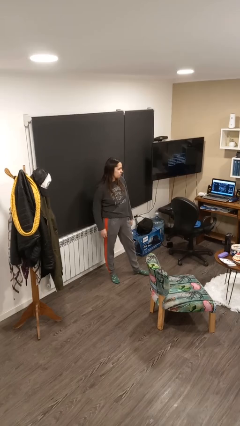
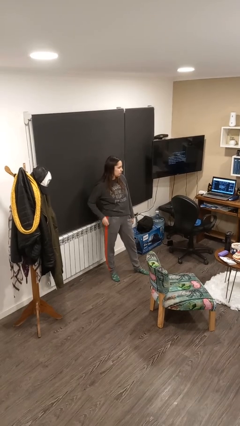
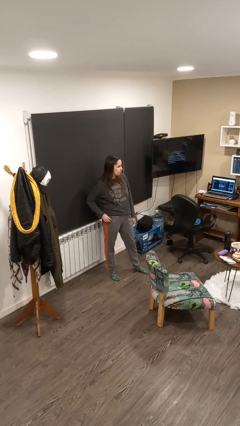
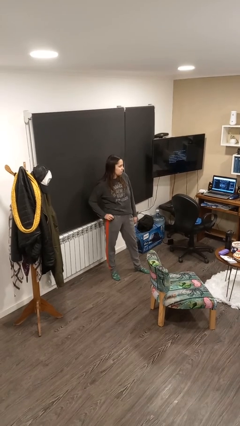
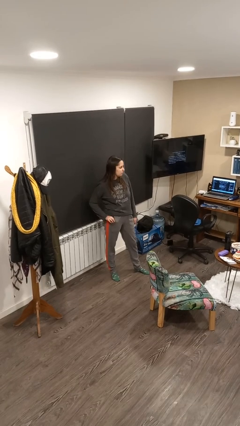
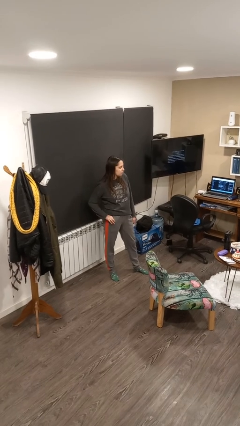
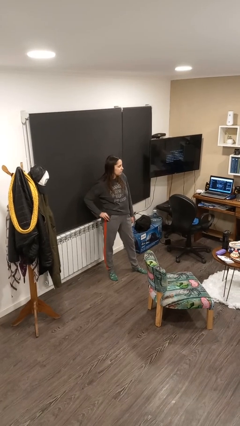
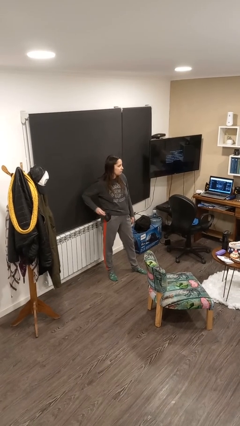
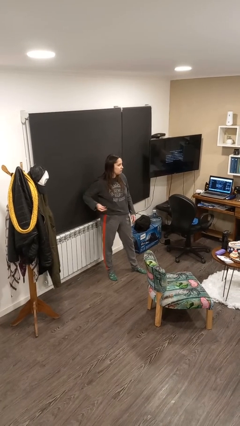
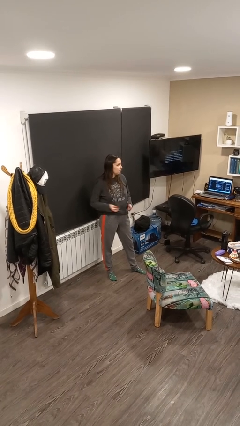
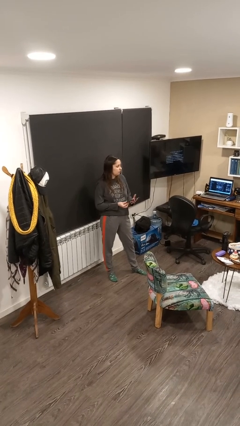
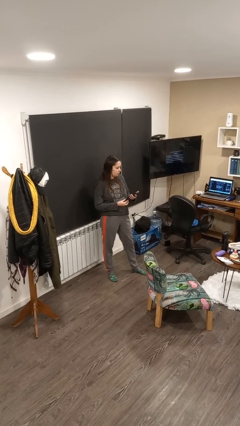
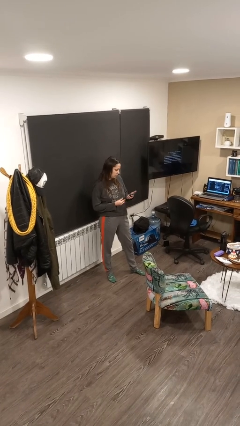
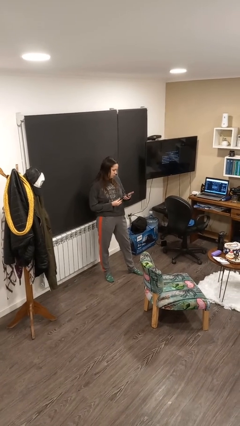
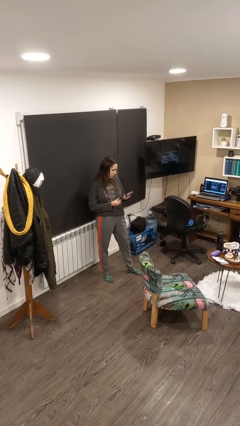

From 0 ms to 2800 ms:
person takes phone from pocket

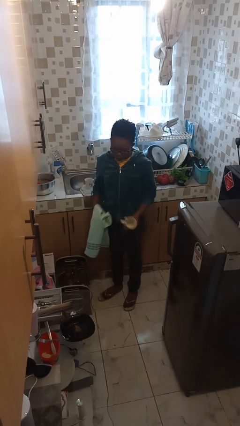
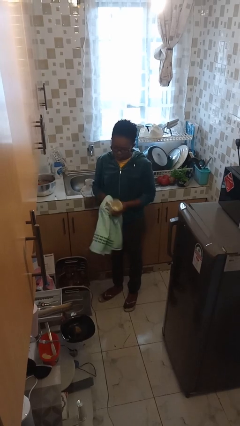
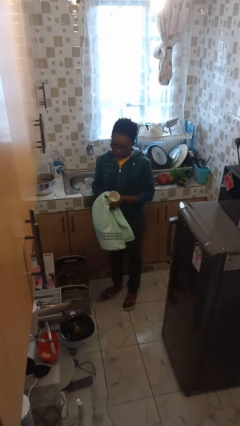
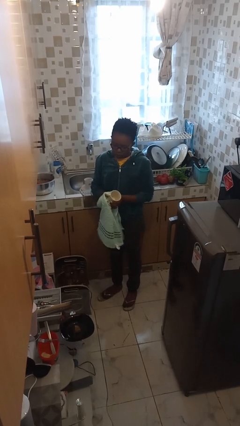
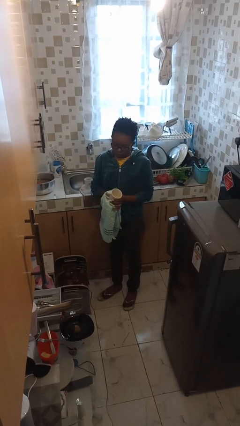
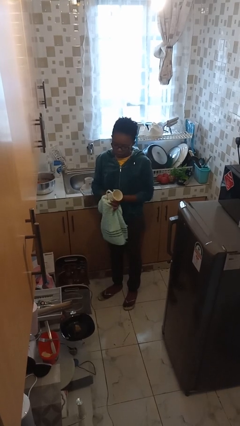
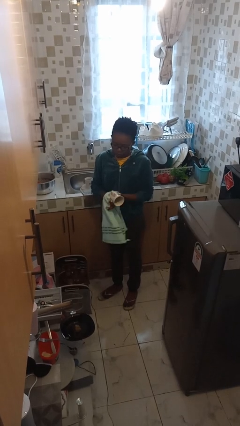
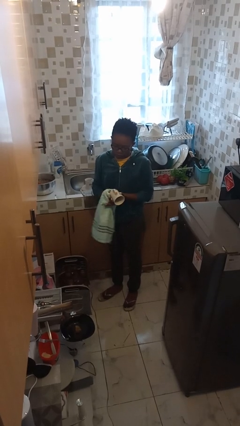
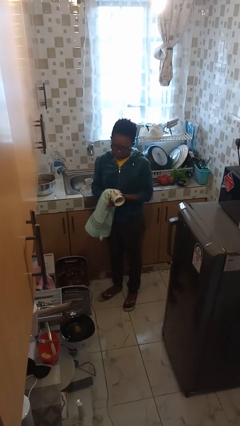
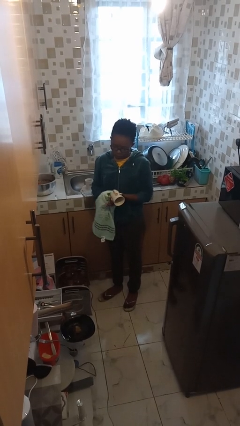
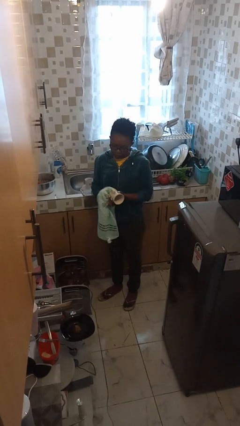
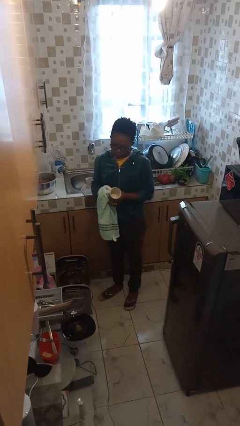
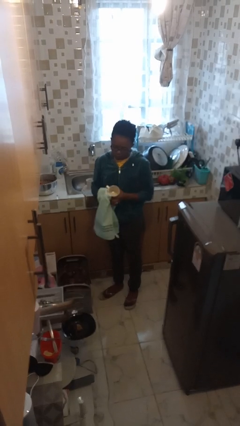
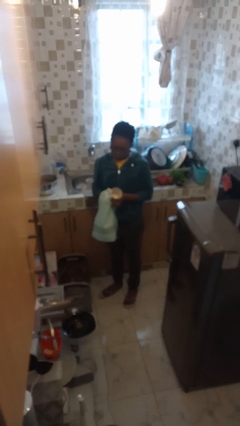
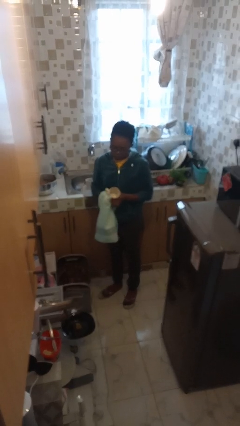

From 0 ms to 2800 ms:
person dries dish

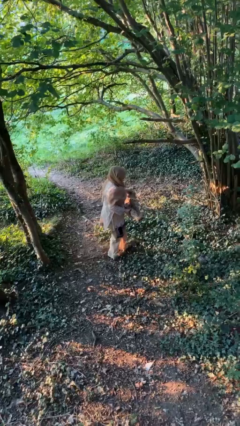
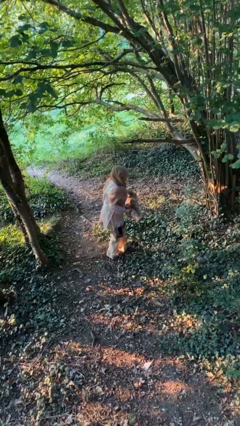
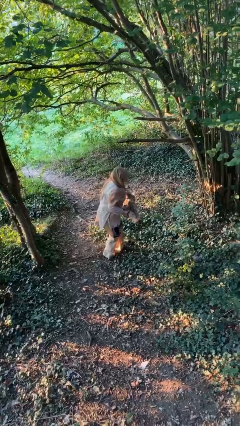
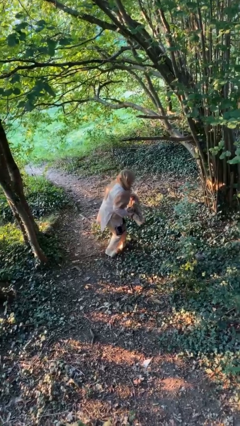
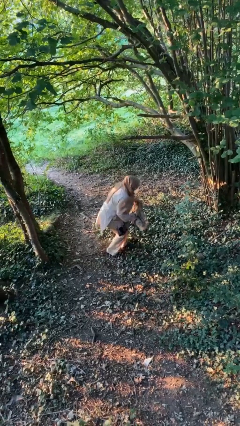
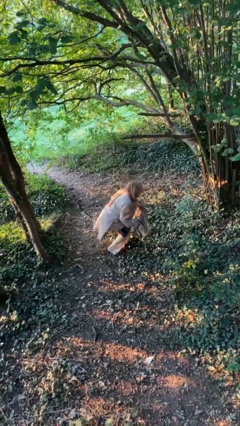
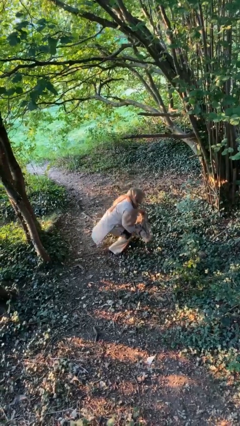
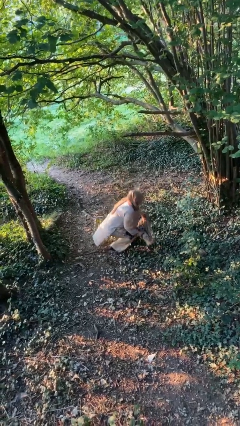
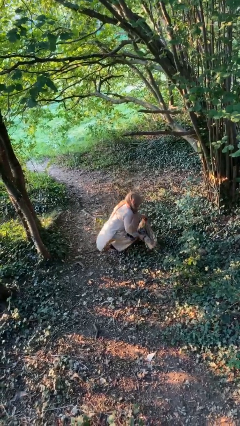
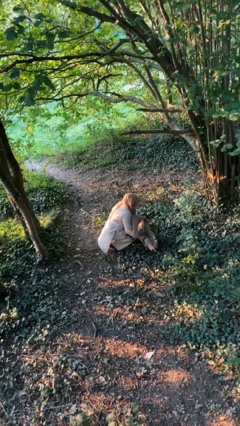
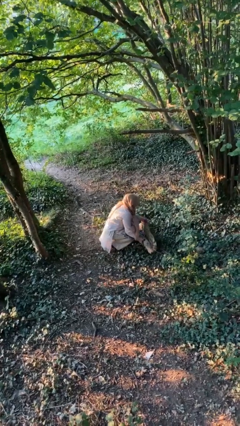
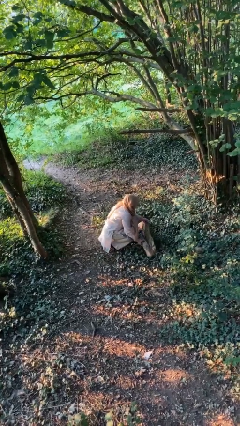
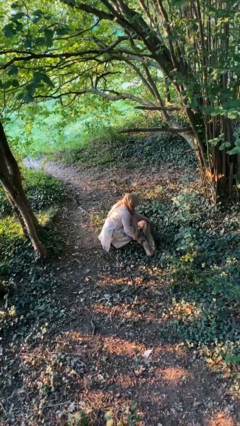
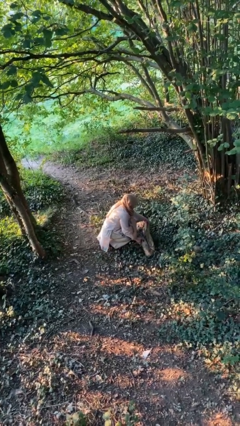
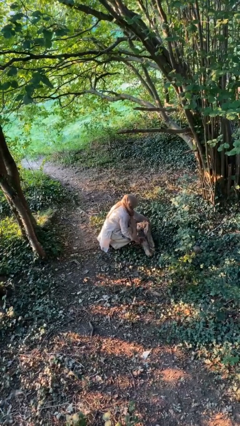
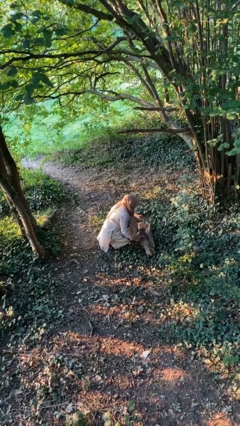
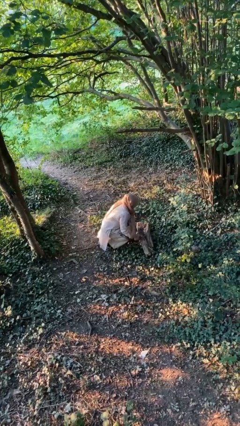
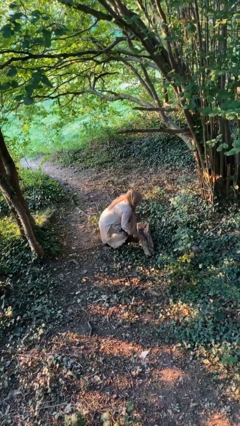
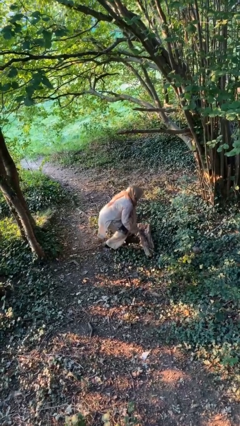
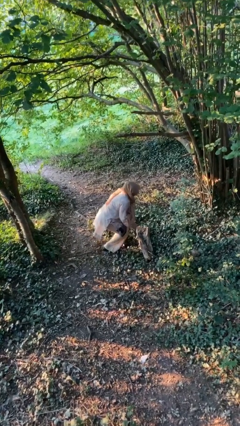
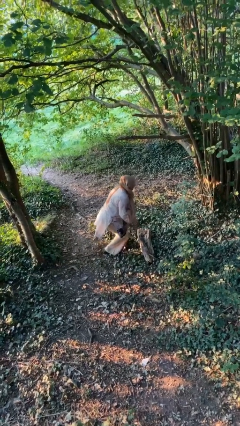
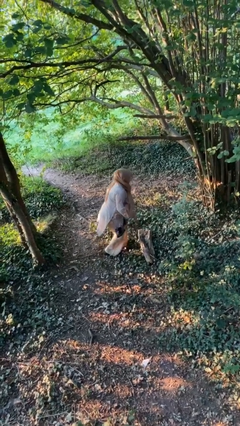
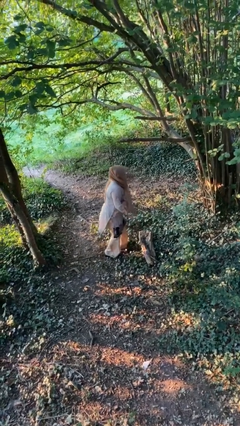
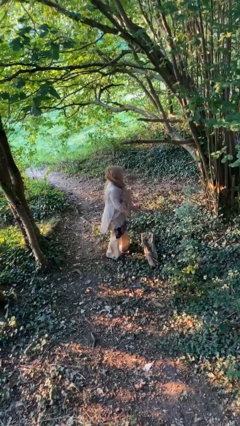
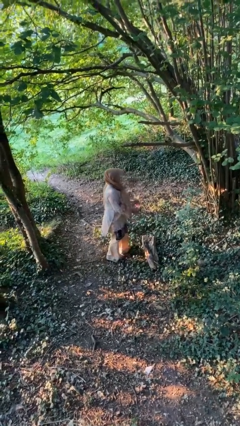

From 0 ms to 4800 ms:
person puts down object on floor

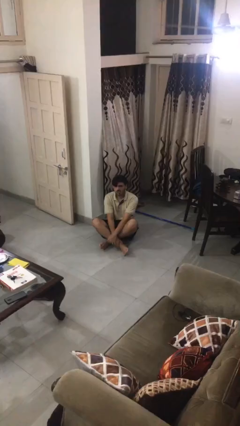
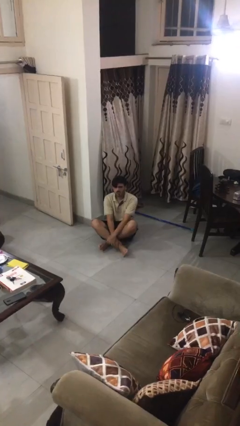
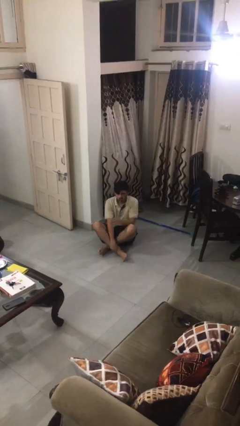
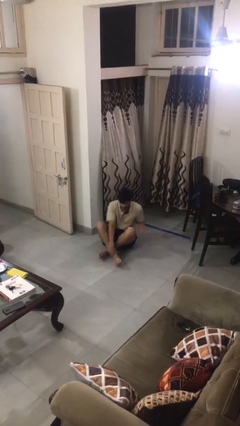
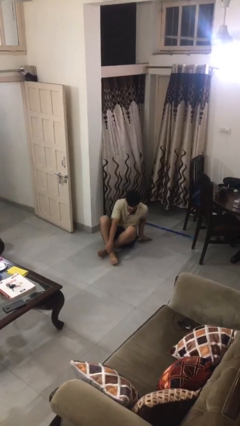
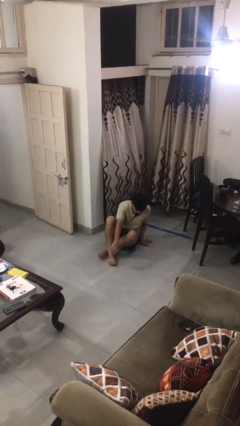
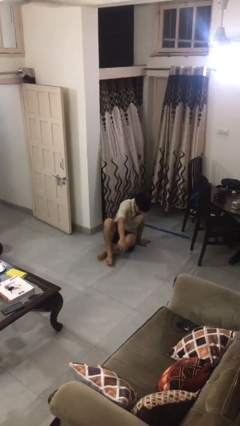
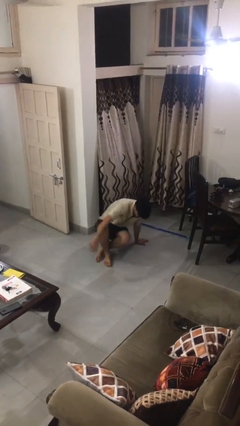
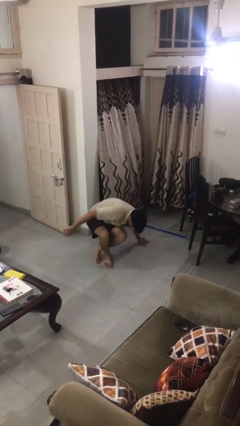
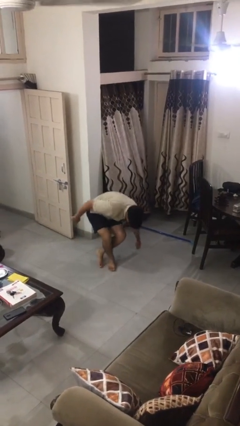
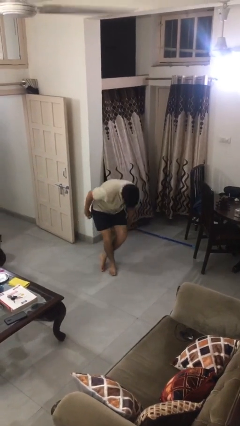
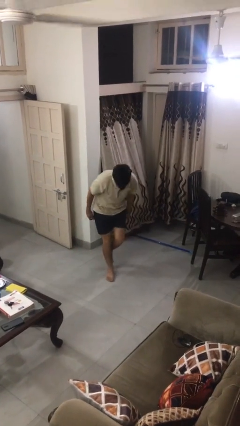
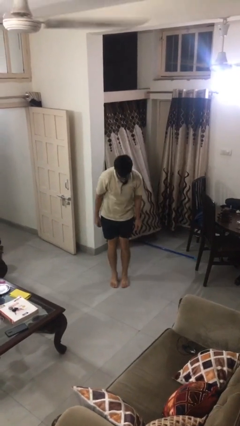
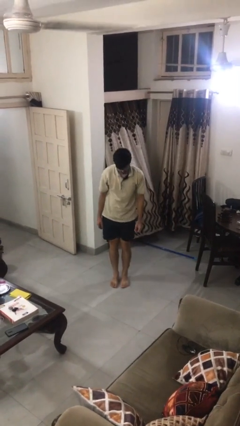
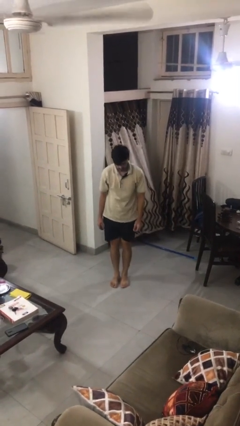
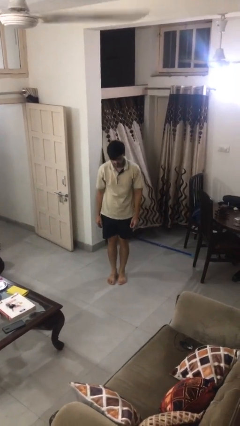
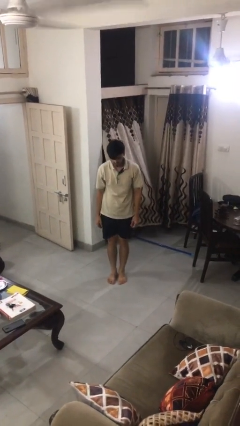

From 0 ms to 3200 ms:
person stands up from floor

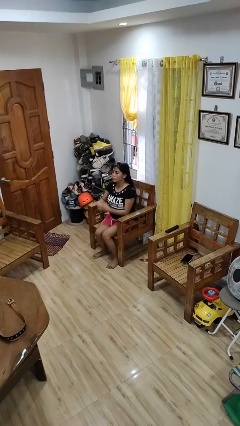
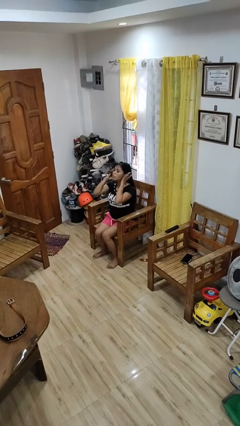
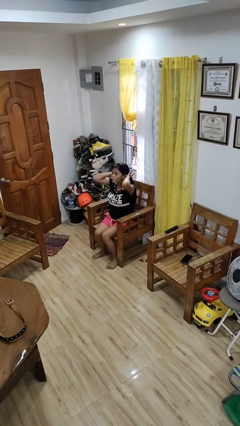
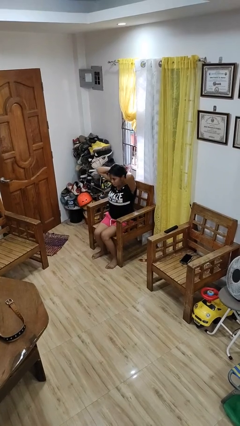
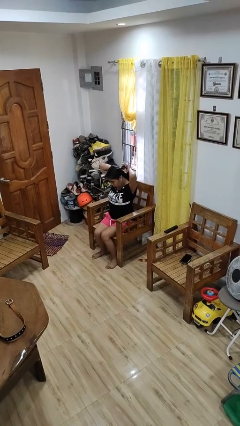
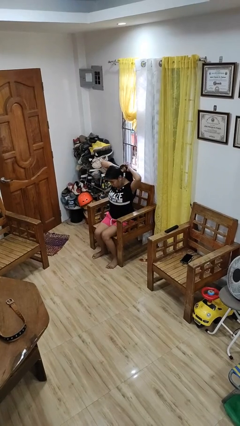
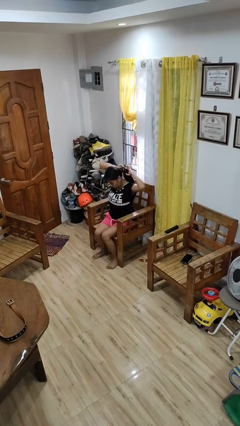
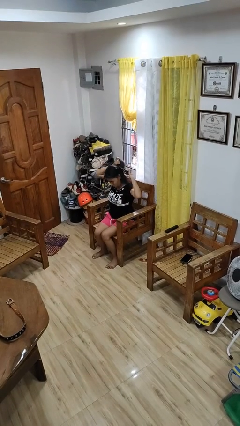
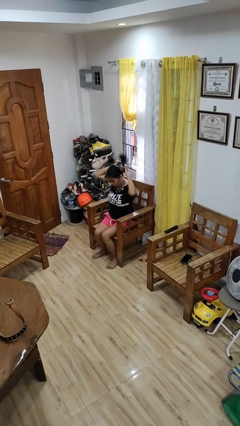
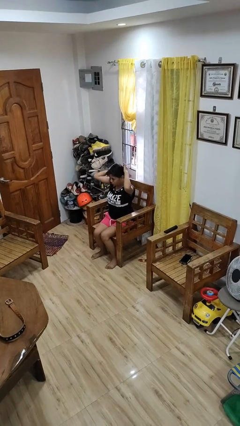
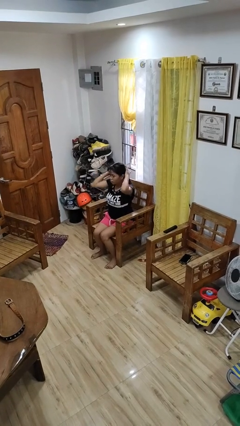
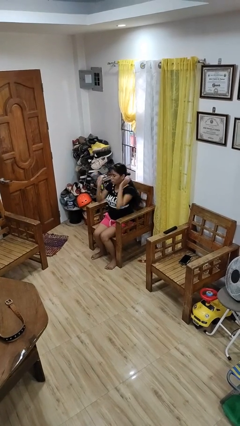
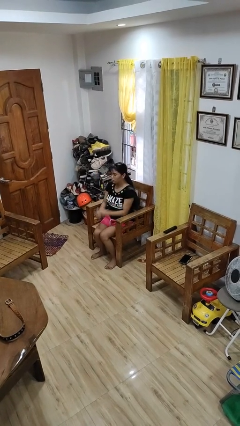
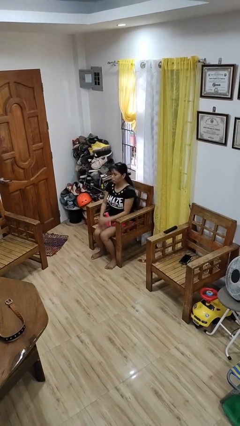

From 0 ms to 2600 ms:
person puts hair in ponytail

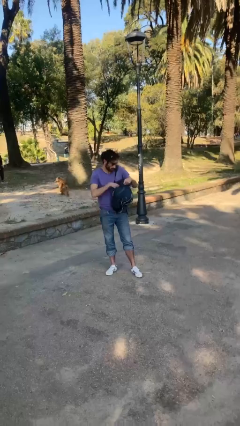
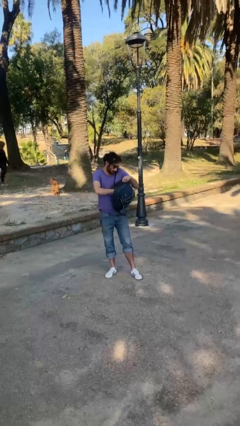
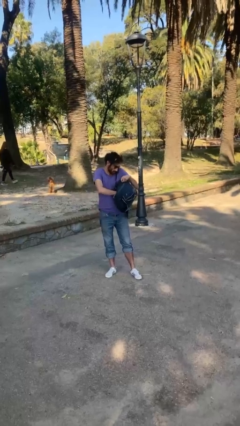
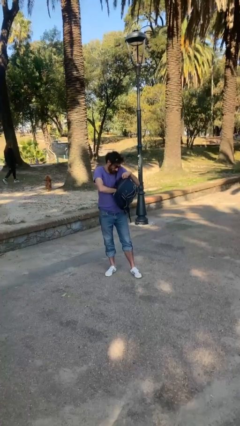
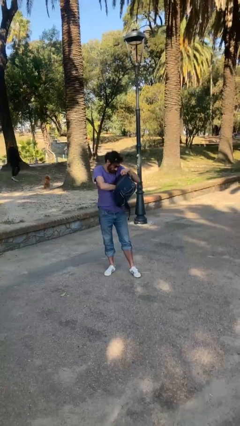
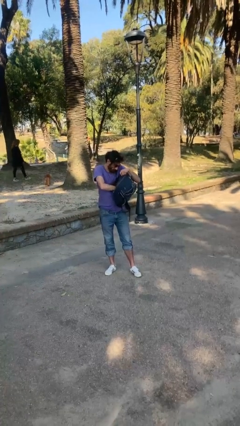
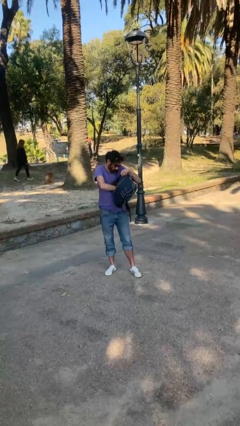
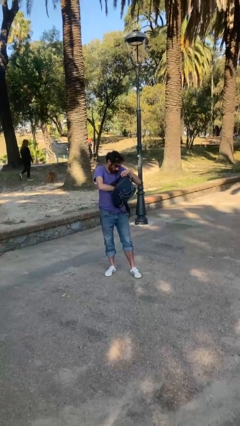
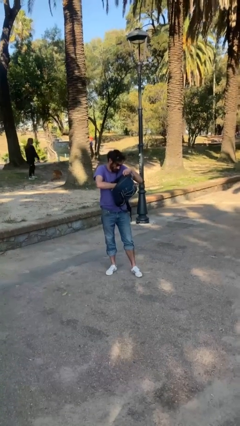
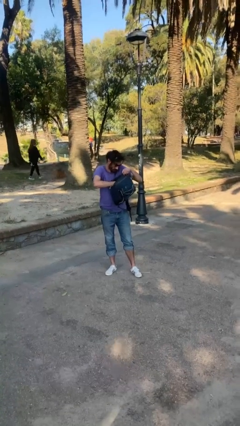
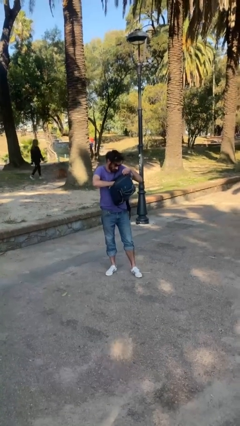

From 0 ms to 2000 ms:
person searches in backpack
